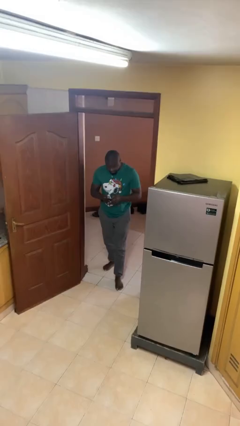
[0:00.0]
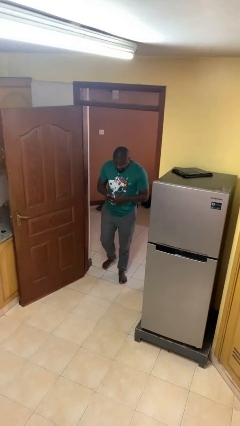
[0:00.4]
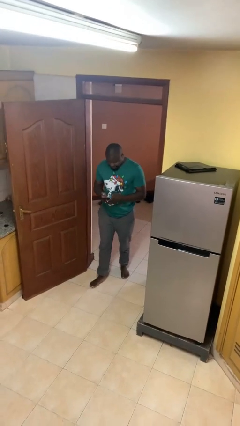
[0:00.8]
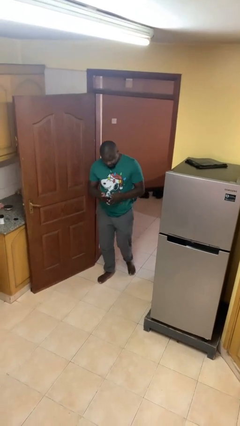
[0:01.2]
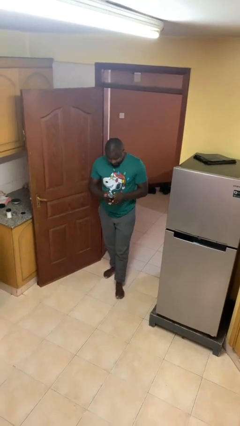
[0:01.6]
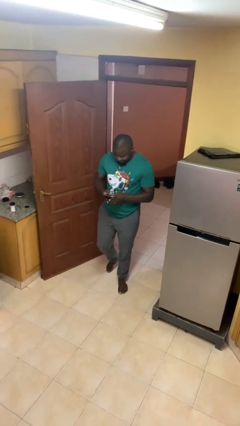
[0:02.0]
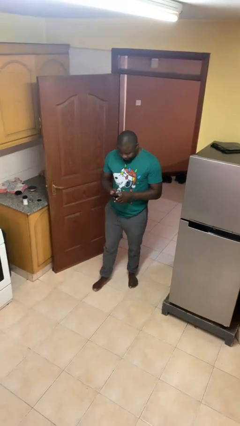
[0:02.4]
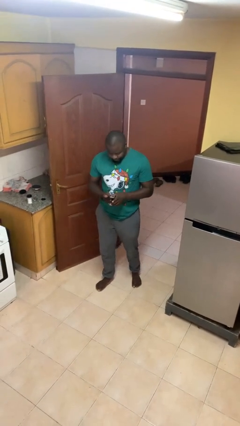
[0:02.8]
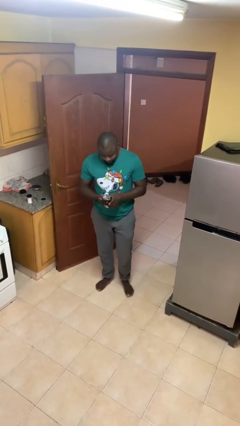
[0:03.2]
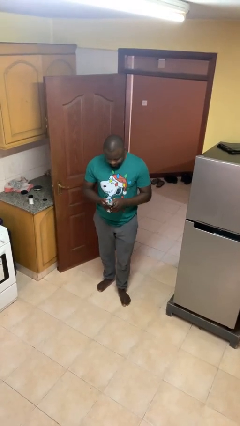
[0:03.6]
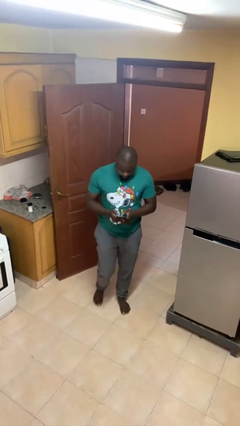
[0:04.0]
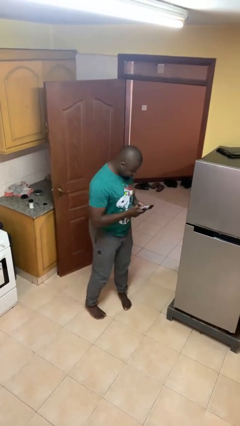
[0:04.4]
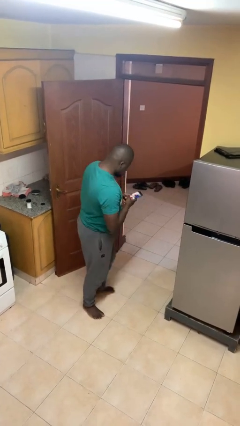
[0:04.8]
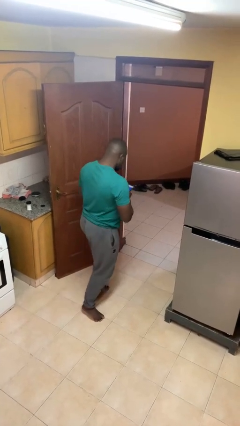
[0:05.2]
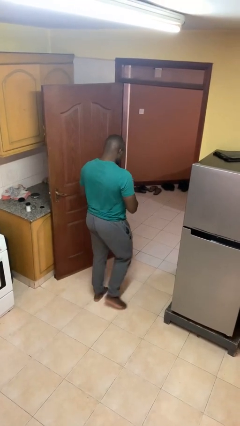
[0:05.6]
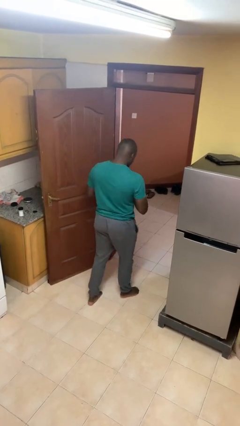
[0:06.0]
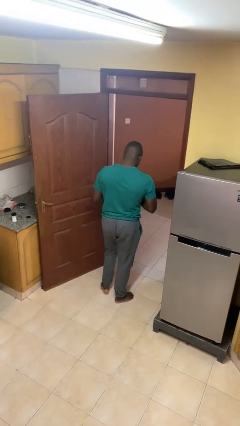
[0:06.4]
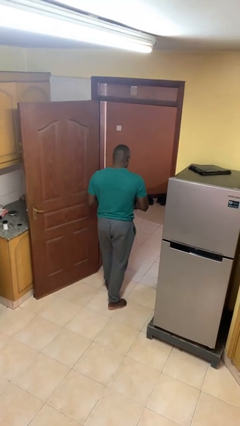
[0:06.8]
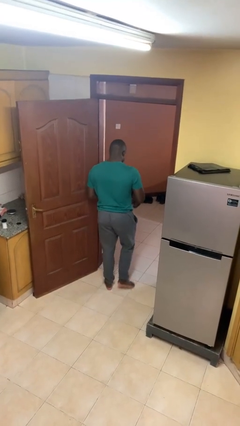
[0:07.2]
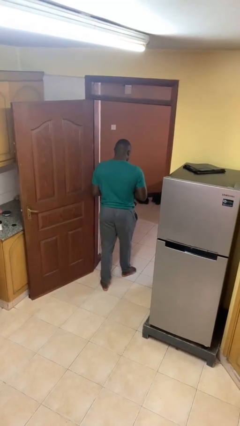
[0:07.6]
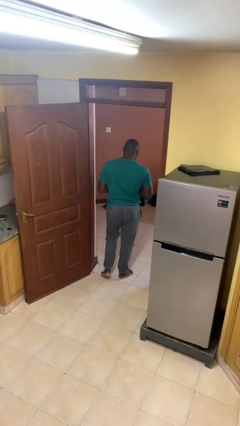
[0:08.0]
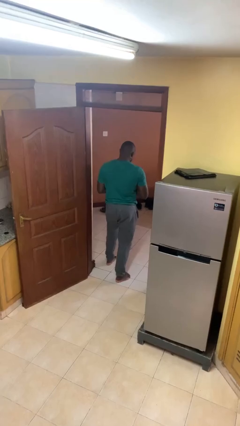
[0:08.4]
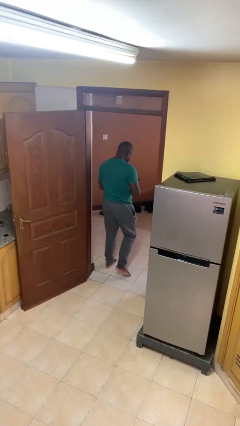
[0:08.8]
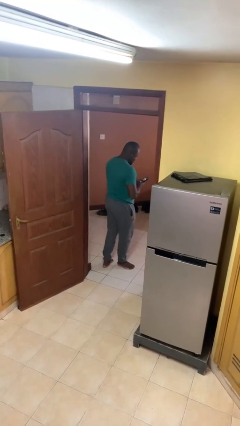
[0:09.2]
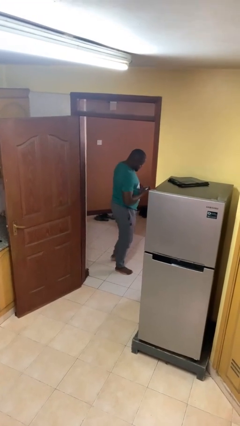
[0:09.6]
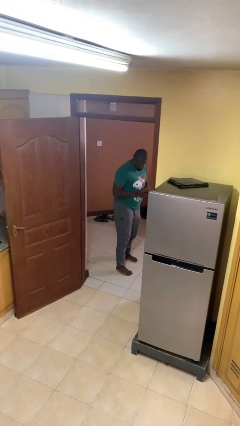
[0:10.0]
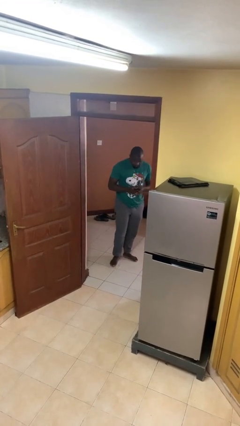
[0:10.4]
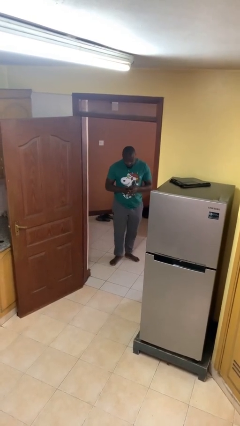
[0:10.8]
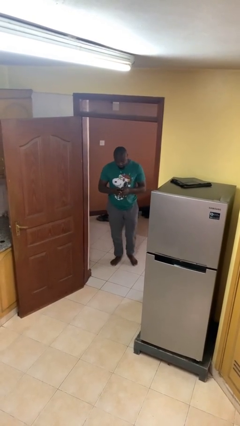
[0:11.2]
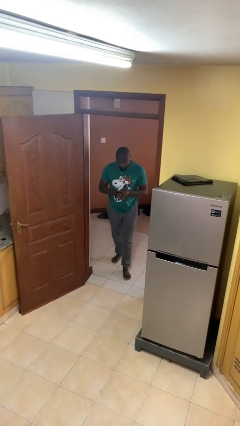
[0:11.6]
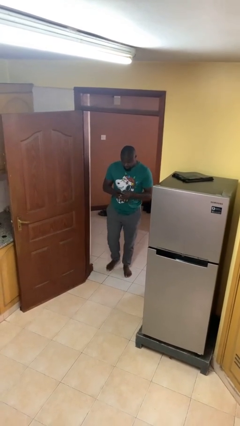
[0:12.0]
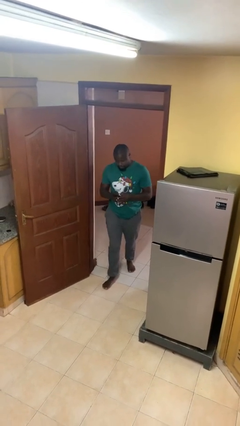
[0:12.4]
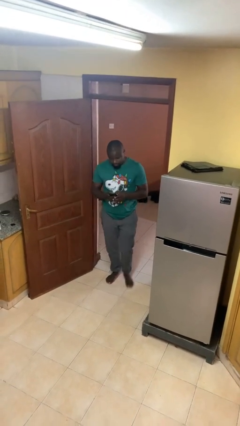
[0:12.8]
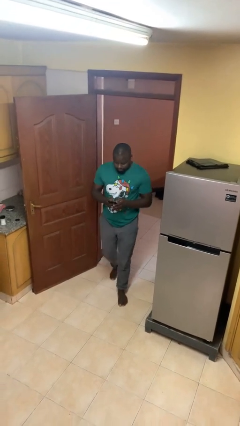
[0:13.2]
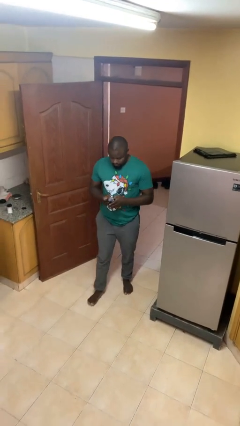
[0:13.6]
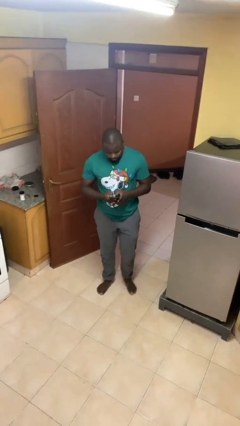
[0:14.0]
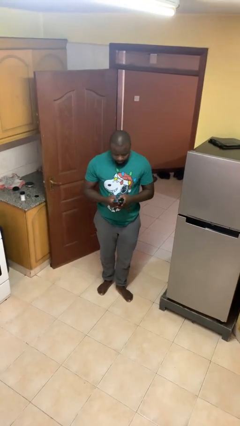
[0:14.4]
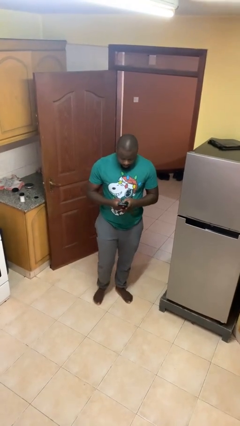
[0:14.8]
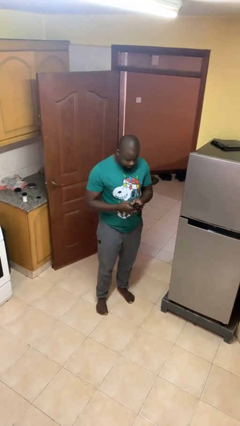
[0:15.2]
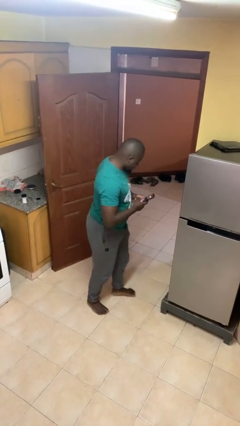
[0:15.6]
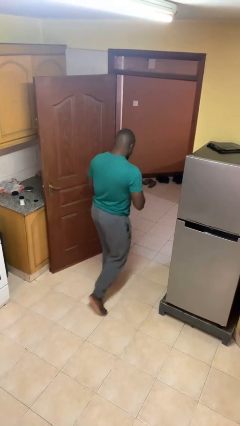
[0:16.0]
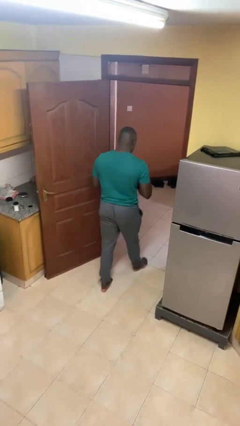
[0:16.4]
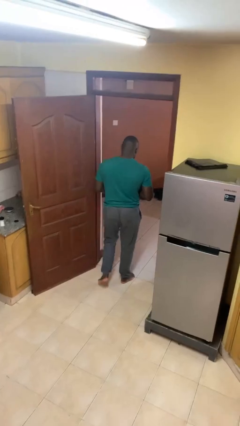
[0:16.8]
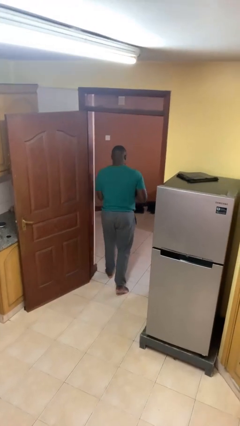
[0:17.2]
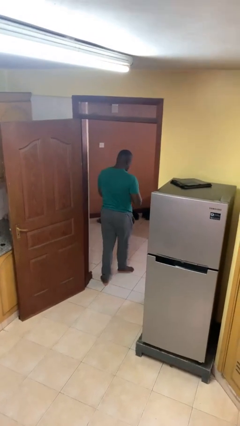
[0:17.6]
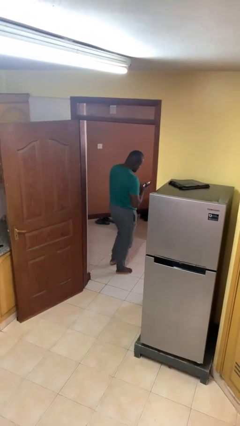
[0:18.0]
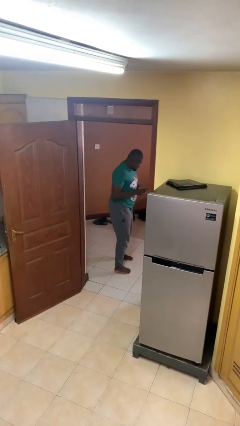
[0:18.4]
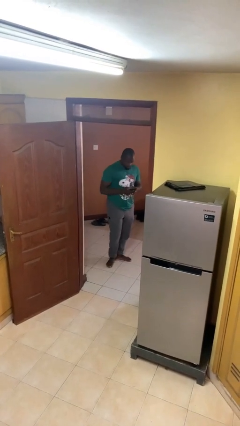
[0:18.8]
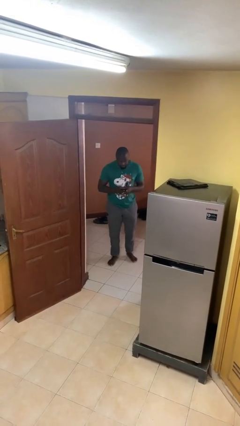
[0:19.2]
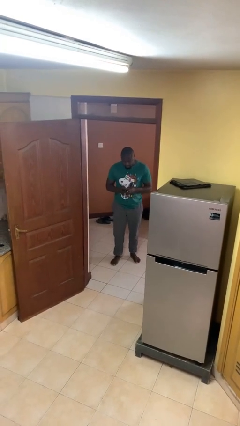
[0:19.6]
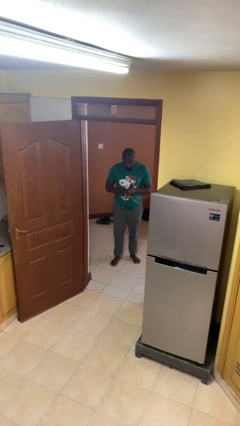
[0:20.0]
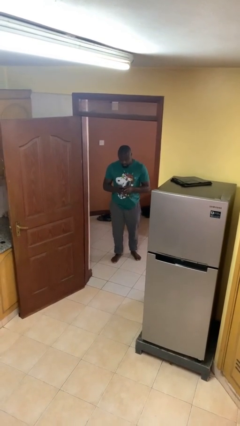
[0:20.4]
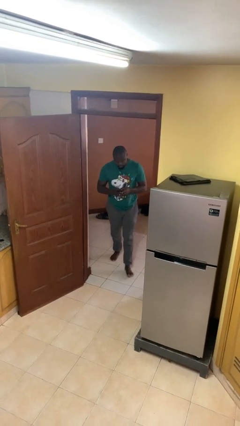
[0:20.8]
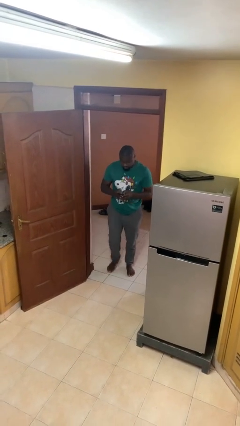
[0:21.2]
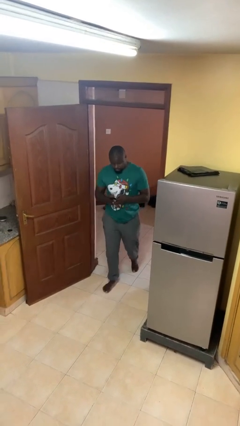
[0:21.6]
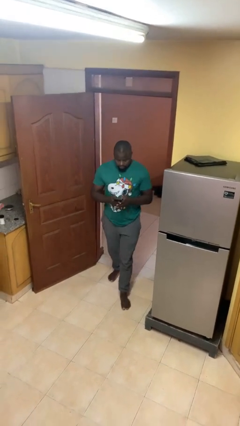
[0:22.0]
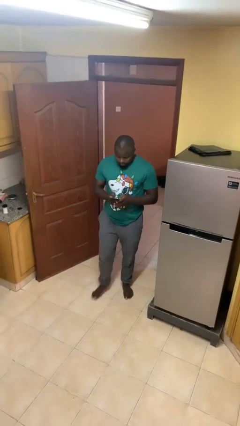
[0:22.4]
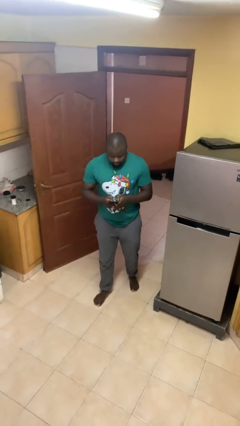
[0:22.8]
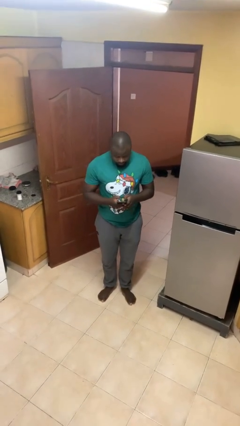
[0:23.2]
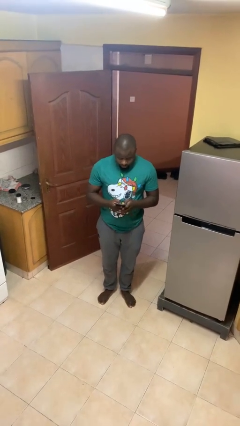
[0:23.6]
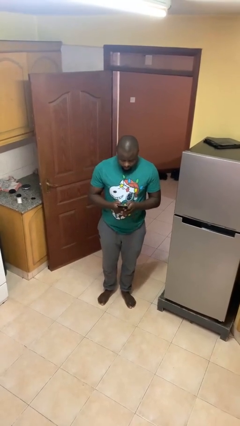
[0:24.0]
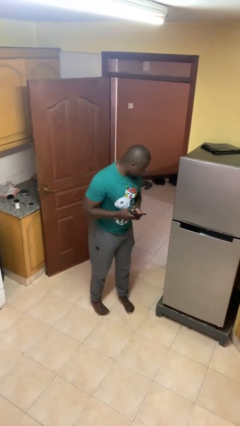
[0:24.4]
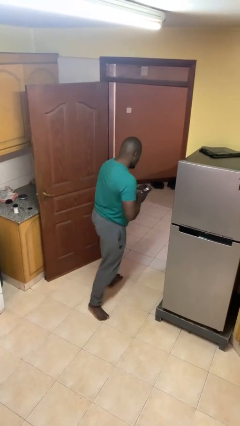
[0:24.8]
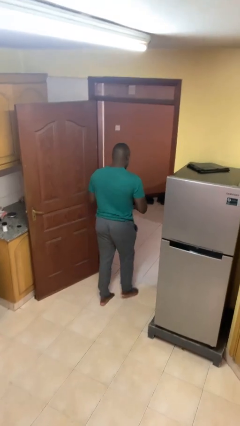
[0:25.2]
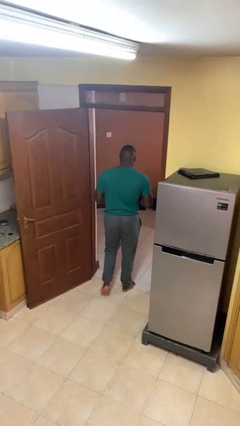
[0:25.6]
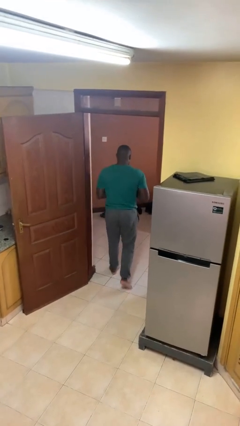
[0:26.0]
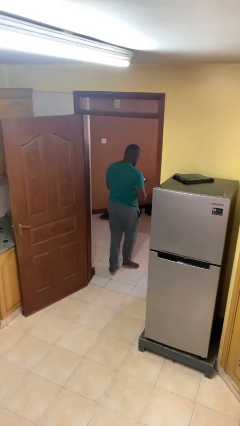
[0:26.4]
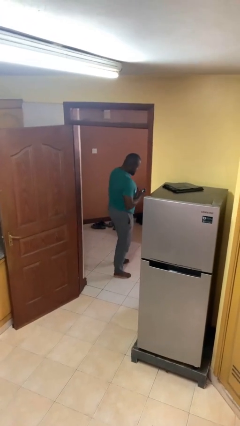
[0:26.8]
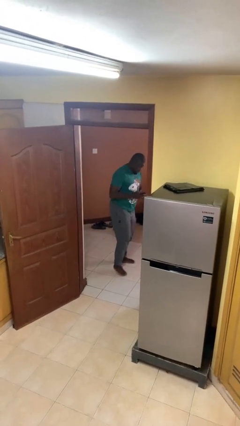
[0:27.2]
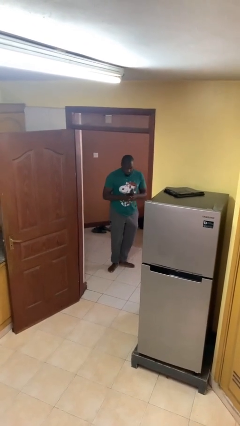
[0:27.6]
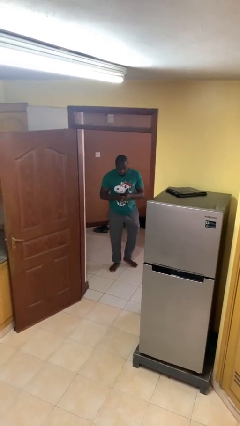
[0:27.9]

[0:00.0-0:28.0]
person texts on phone

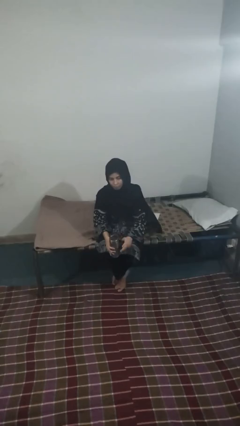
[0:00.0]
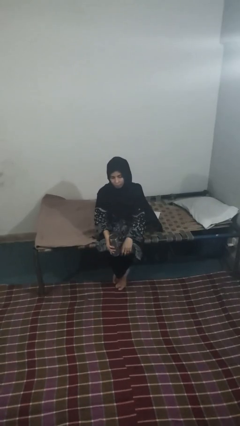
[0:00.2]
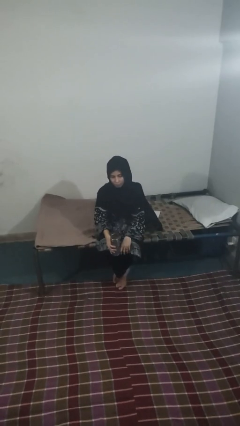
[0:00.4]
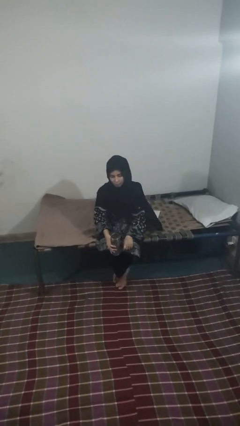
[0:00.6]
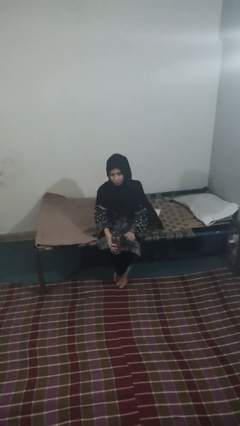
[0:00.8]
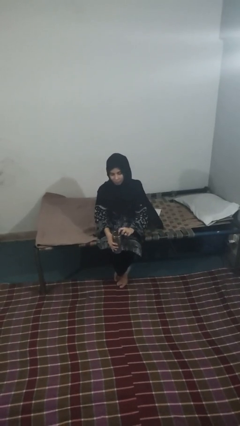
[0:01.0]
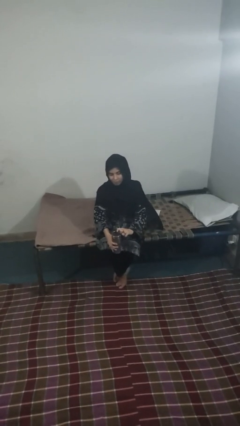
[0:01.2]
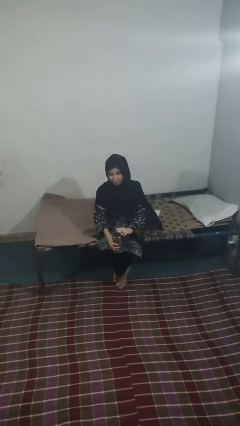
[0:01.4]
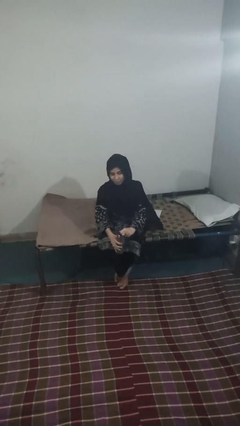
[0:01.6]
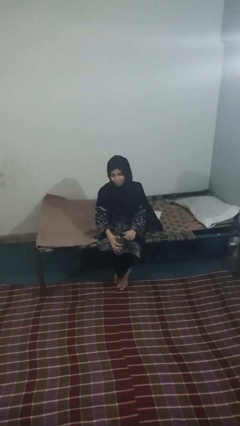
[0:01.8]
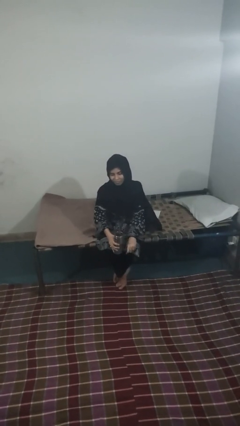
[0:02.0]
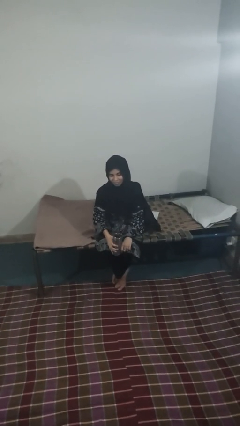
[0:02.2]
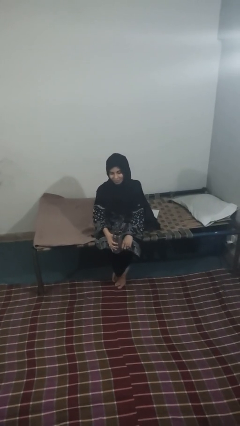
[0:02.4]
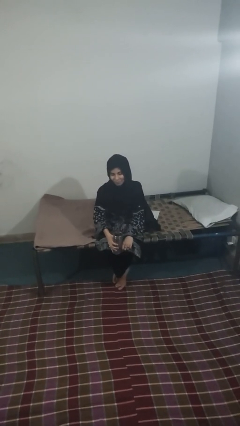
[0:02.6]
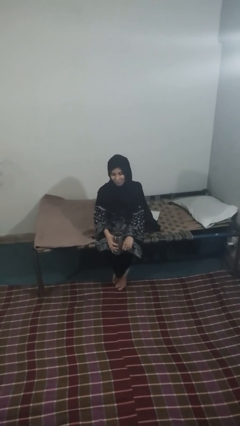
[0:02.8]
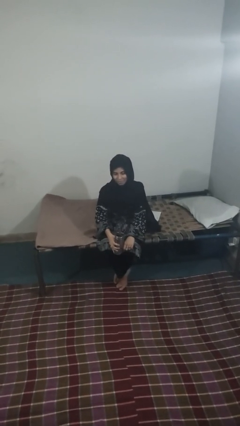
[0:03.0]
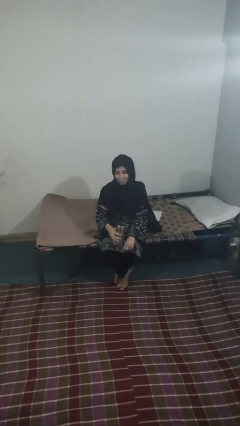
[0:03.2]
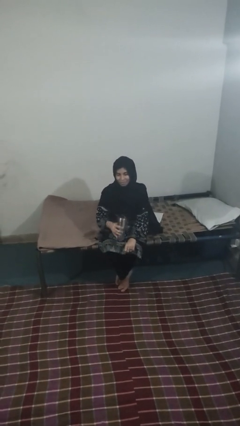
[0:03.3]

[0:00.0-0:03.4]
person opens beverage can

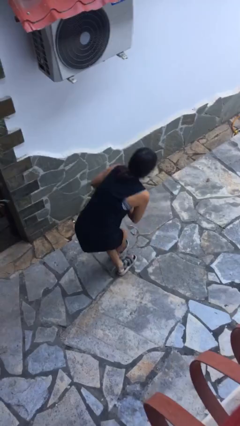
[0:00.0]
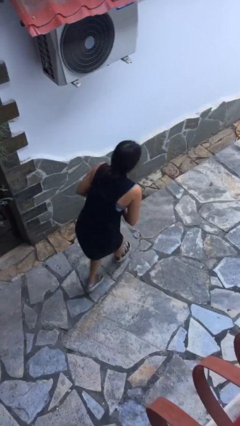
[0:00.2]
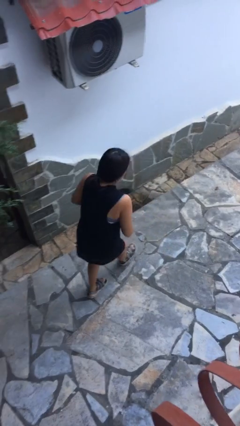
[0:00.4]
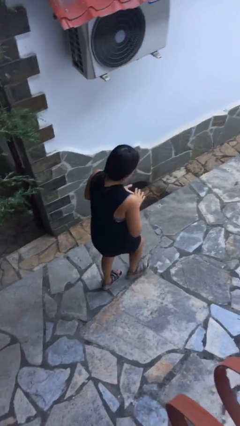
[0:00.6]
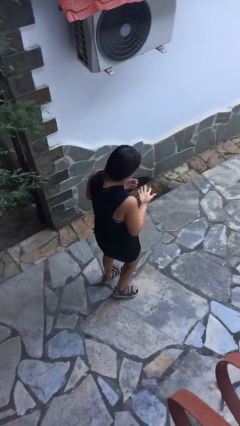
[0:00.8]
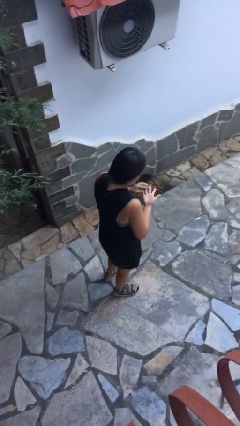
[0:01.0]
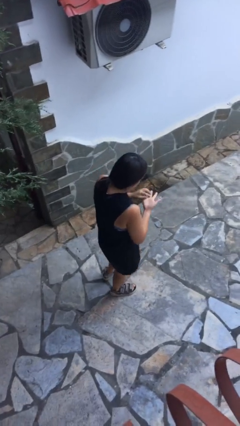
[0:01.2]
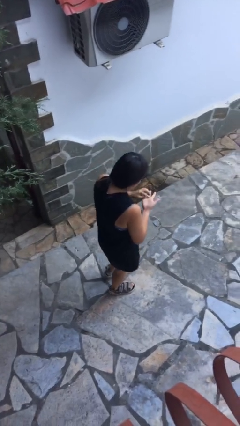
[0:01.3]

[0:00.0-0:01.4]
person stands up from floor
